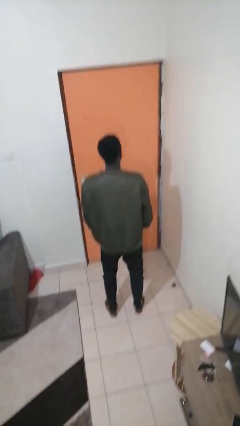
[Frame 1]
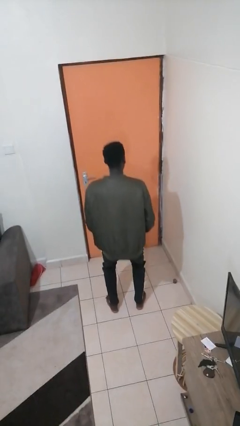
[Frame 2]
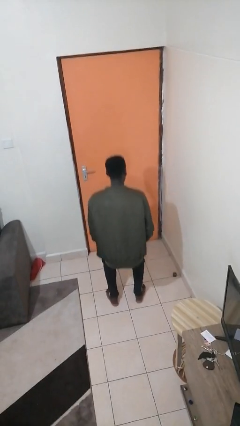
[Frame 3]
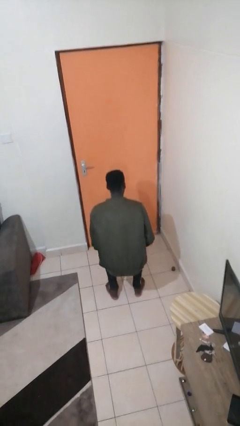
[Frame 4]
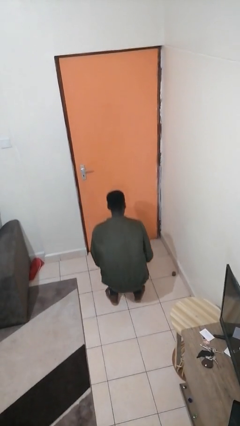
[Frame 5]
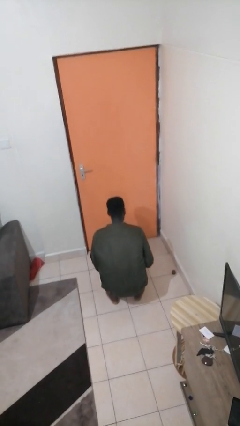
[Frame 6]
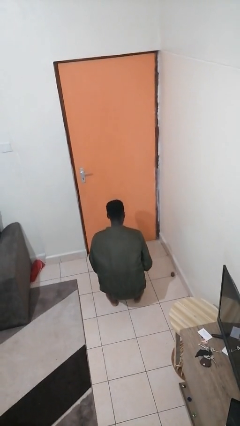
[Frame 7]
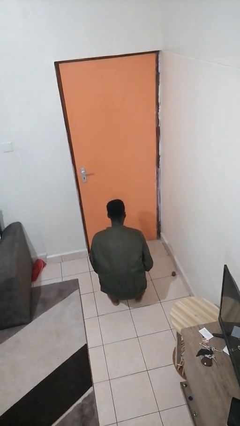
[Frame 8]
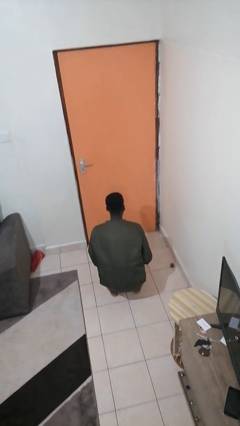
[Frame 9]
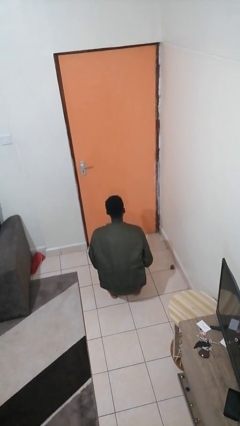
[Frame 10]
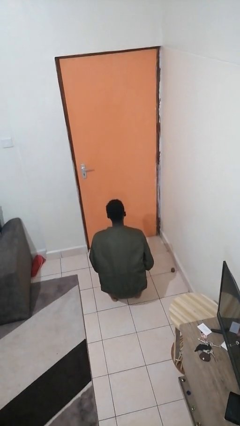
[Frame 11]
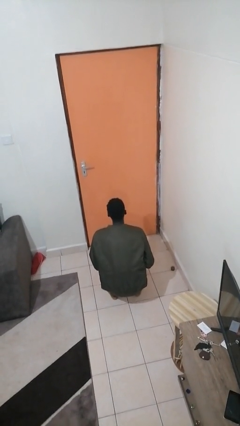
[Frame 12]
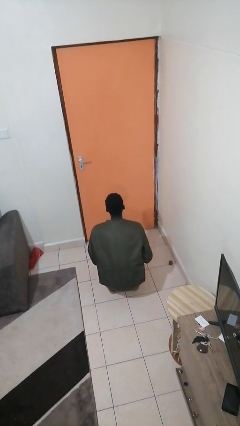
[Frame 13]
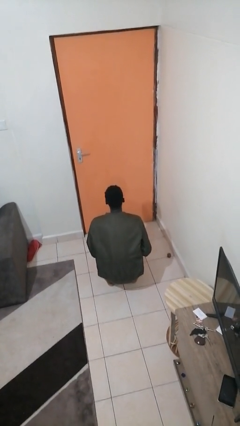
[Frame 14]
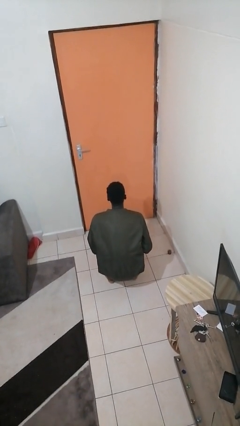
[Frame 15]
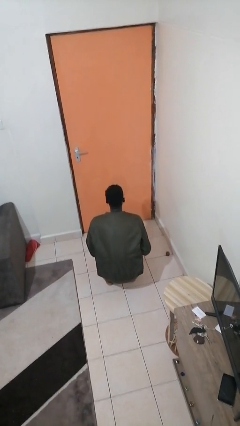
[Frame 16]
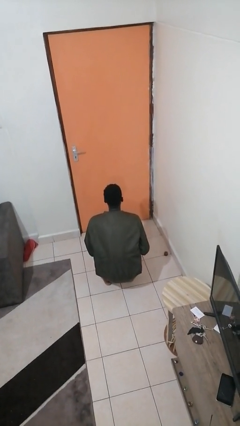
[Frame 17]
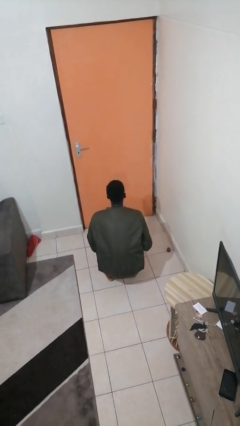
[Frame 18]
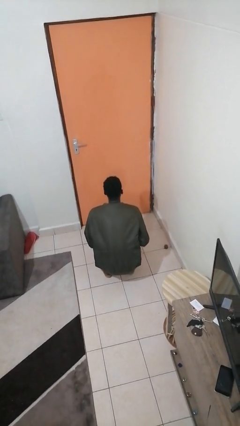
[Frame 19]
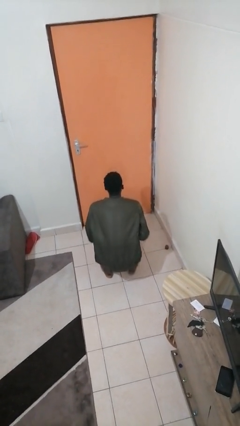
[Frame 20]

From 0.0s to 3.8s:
person squats

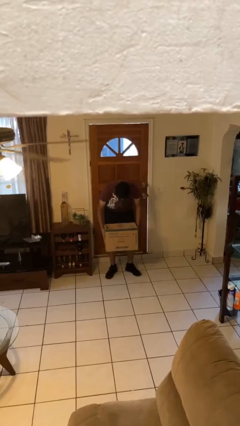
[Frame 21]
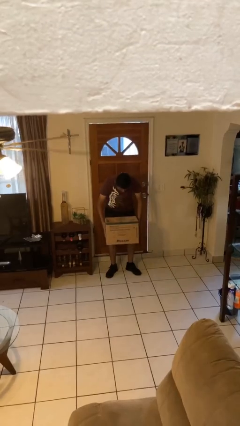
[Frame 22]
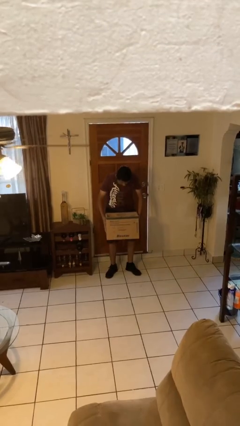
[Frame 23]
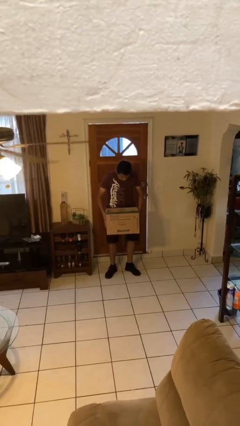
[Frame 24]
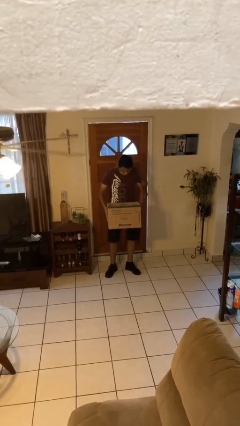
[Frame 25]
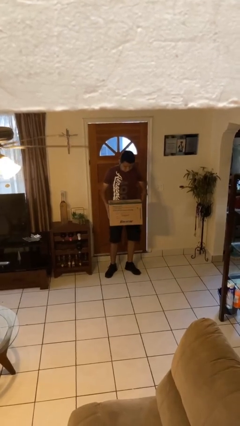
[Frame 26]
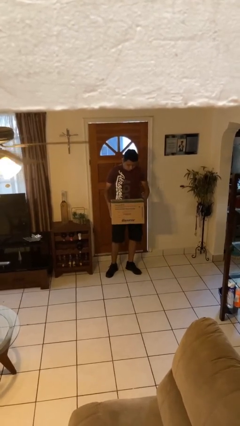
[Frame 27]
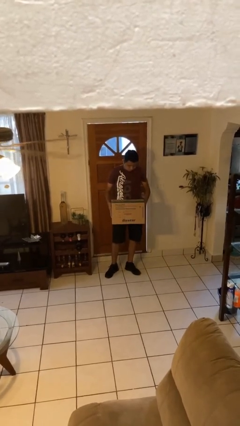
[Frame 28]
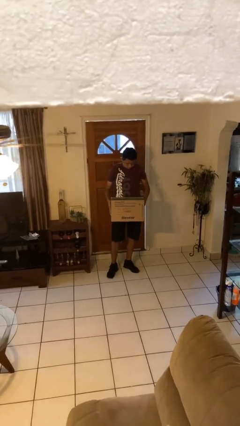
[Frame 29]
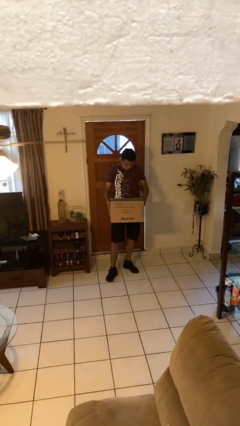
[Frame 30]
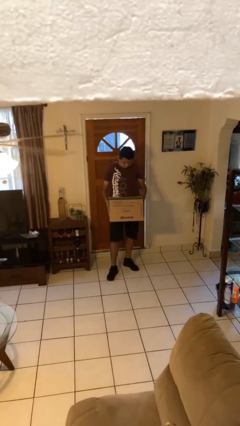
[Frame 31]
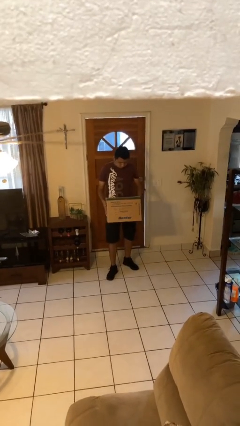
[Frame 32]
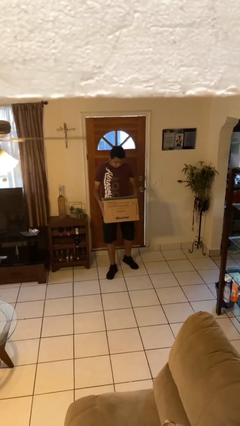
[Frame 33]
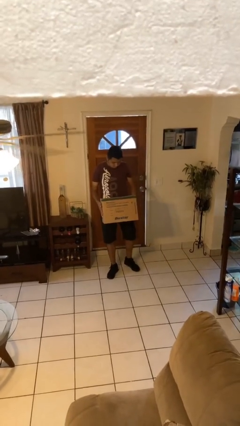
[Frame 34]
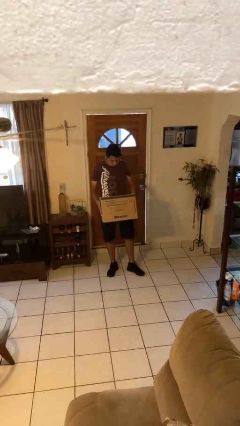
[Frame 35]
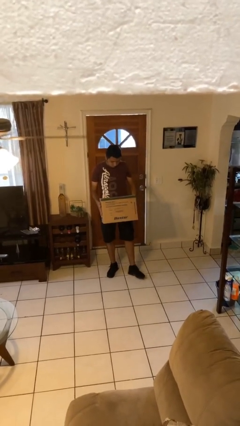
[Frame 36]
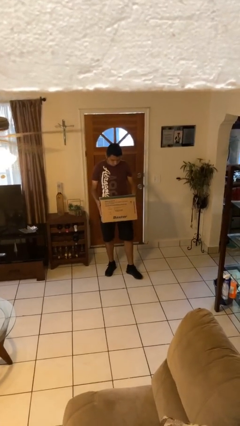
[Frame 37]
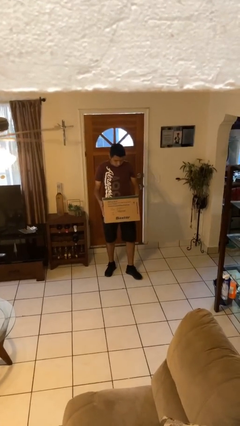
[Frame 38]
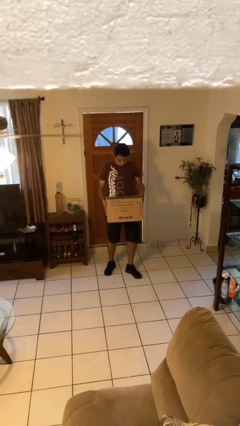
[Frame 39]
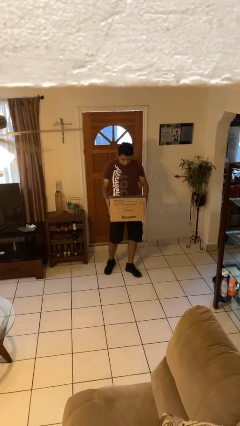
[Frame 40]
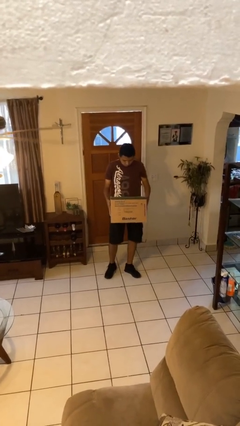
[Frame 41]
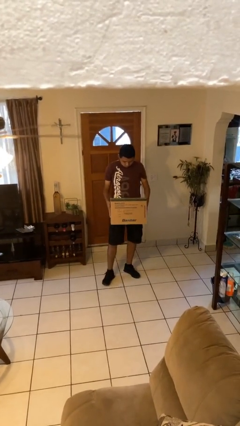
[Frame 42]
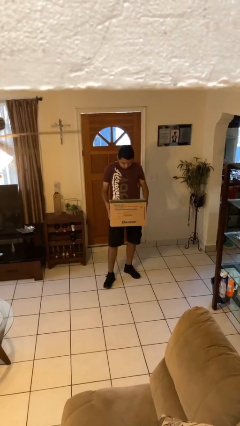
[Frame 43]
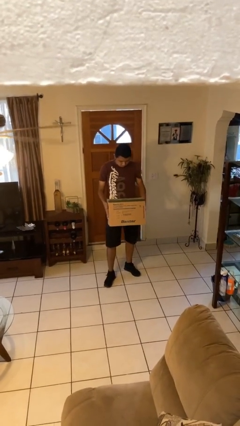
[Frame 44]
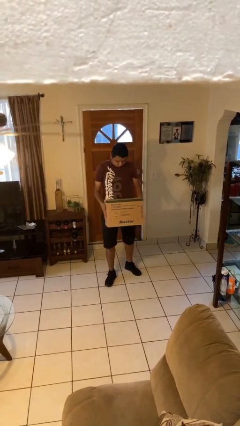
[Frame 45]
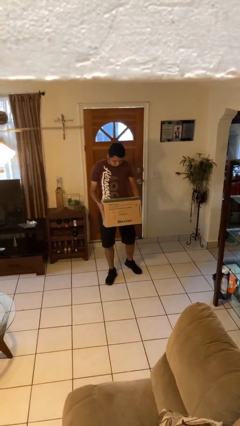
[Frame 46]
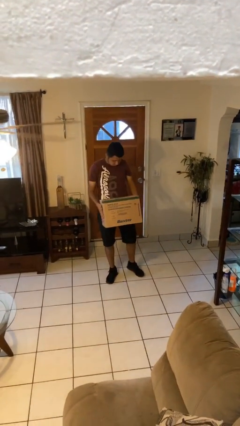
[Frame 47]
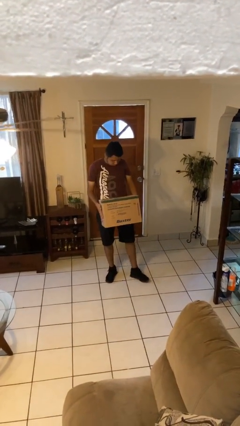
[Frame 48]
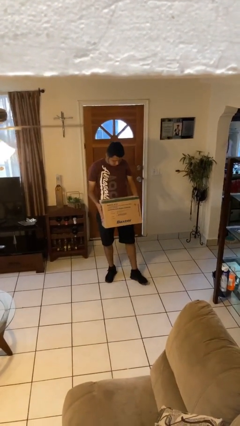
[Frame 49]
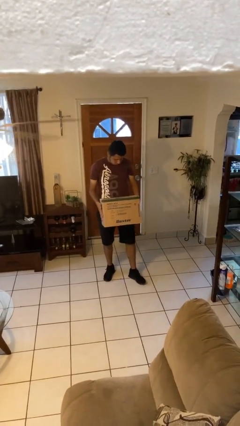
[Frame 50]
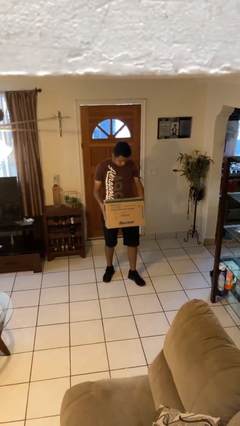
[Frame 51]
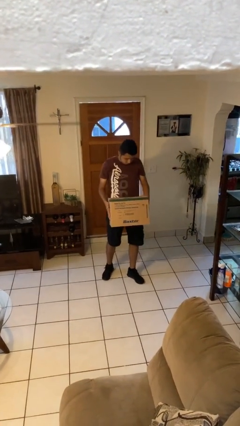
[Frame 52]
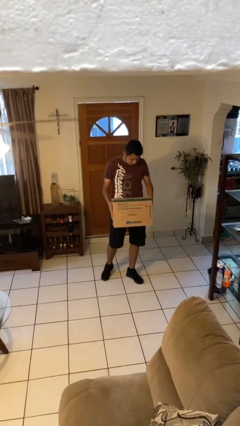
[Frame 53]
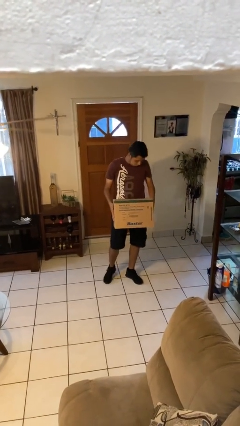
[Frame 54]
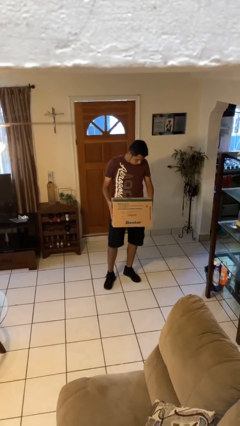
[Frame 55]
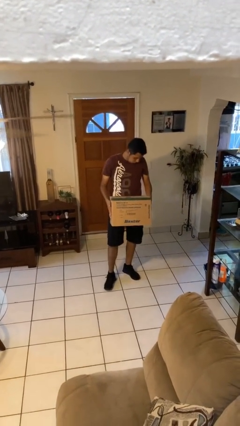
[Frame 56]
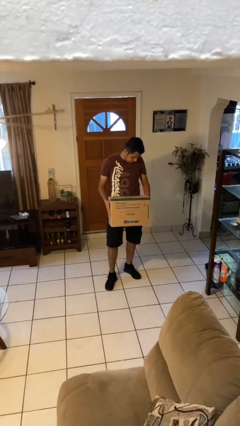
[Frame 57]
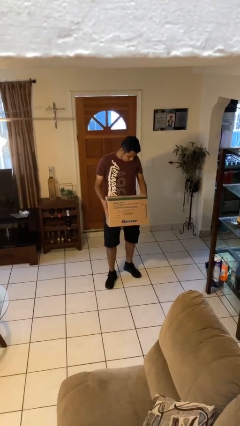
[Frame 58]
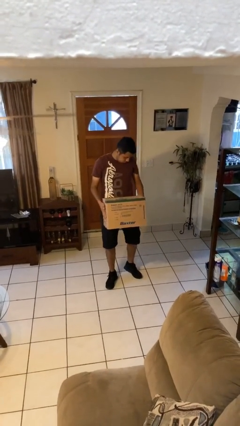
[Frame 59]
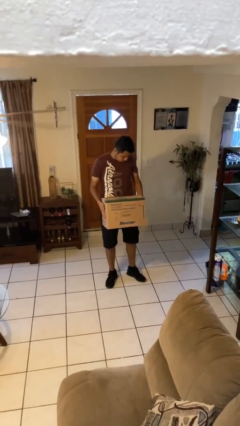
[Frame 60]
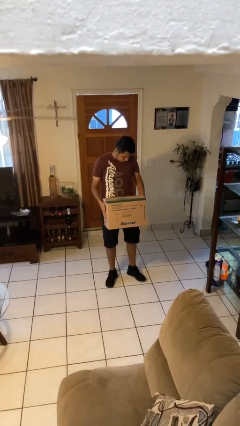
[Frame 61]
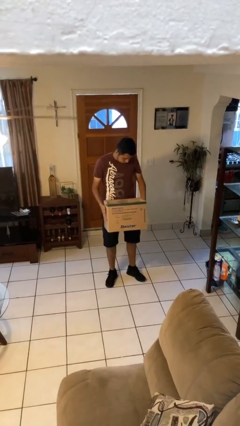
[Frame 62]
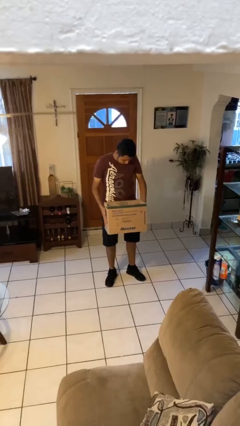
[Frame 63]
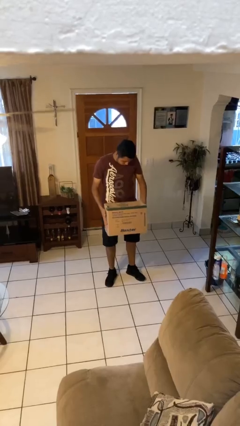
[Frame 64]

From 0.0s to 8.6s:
person carries heavy object

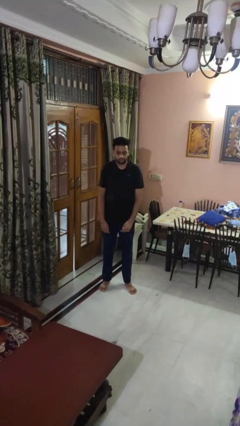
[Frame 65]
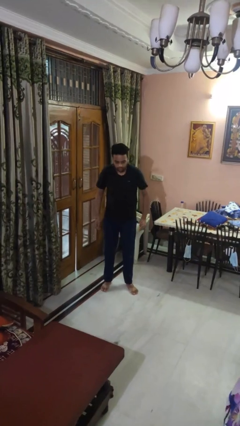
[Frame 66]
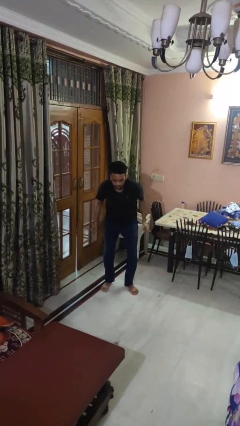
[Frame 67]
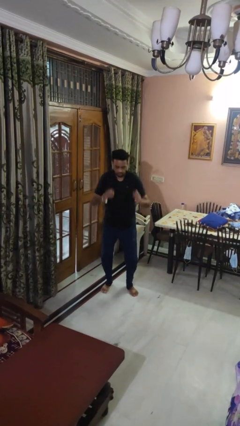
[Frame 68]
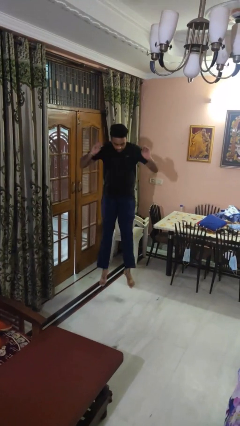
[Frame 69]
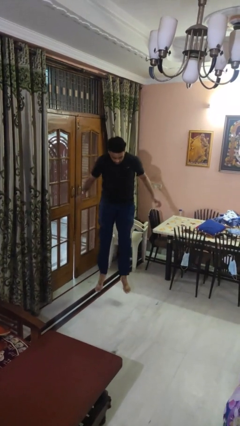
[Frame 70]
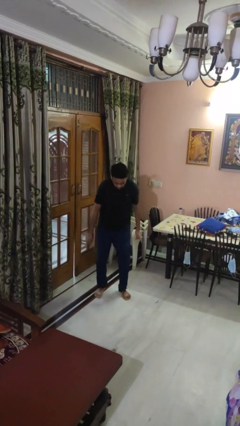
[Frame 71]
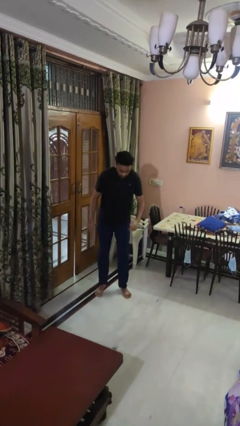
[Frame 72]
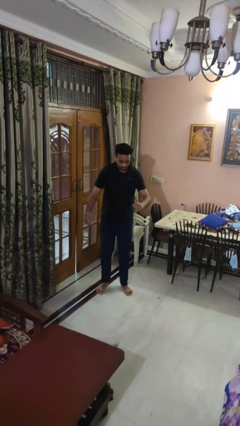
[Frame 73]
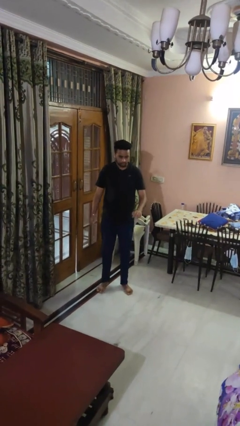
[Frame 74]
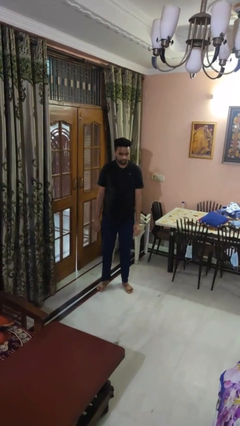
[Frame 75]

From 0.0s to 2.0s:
person jumps

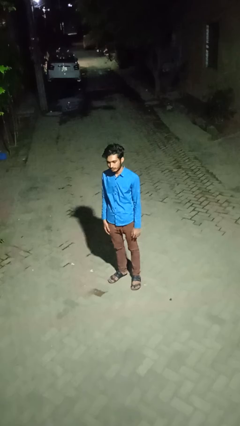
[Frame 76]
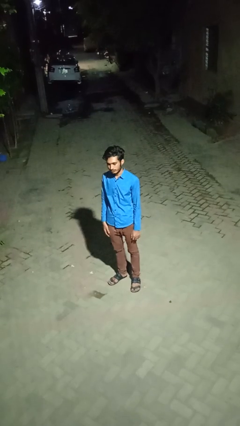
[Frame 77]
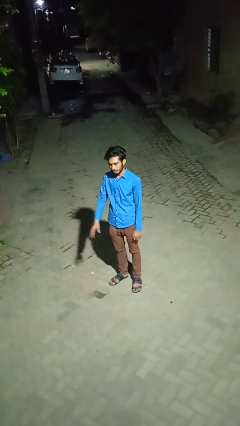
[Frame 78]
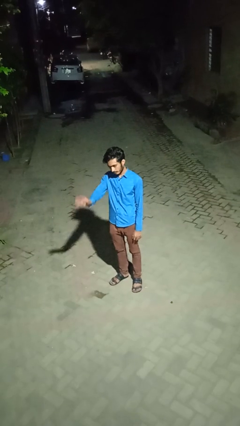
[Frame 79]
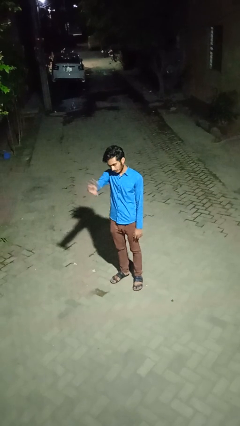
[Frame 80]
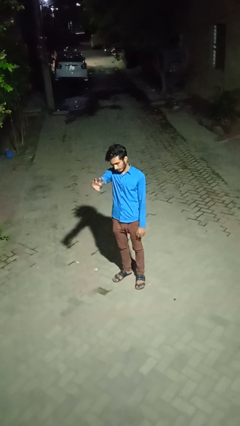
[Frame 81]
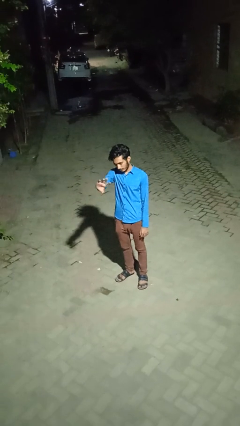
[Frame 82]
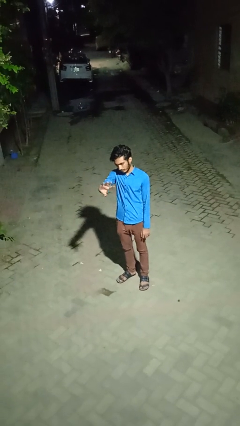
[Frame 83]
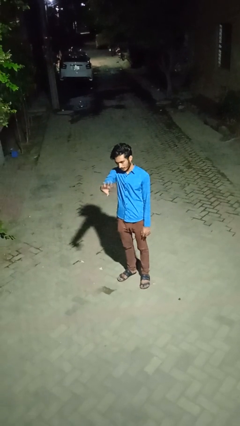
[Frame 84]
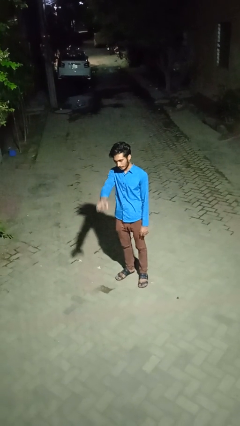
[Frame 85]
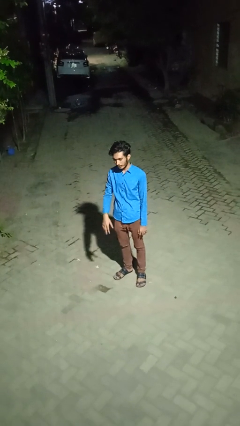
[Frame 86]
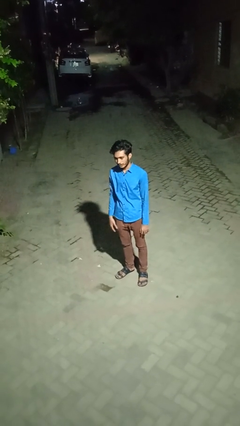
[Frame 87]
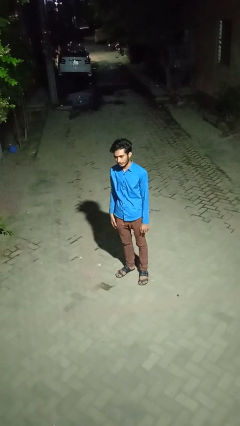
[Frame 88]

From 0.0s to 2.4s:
person waves at person

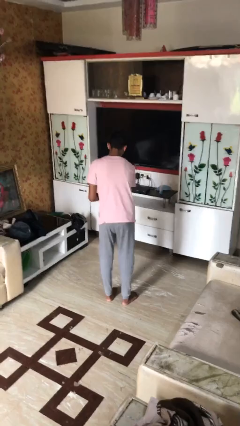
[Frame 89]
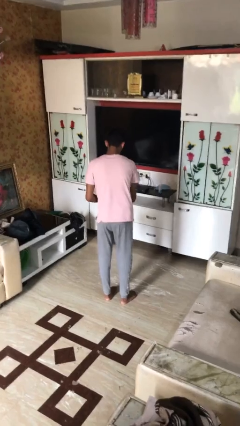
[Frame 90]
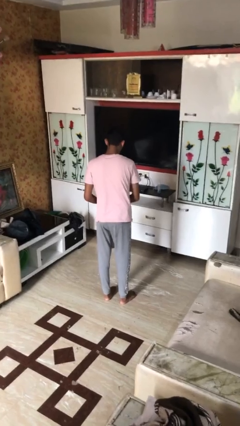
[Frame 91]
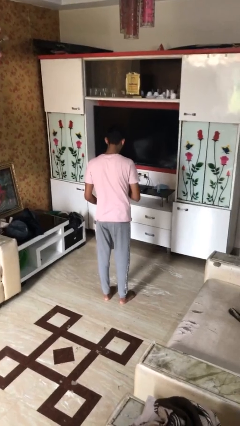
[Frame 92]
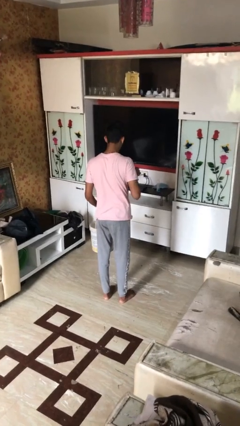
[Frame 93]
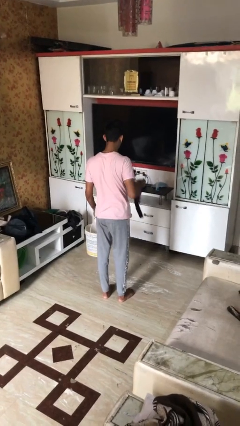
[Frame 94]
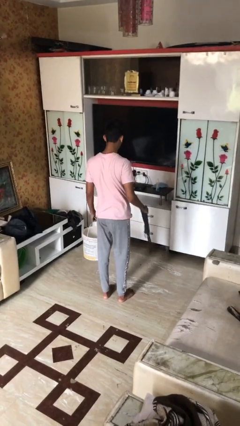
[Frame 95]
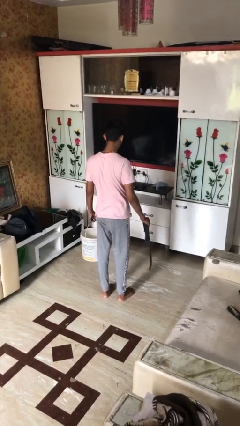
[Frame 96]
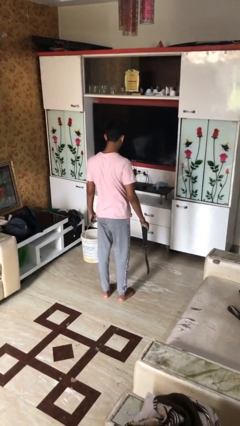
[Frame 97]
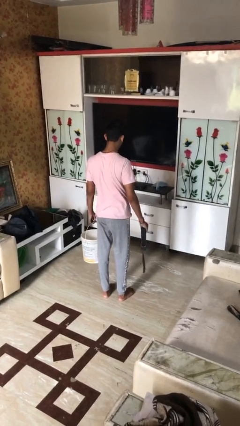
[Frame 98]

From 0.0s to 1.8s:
person takes object from basket
